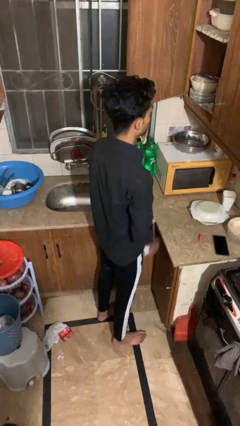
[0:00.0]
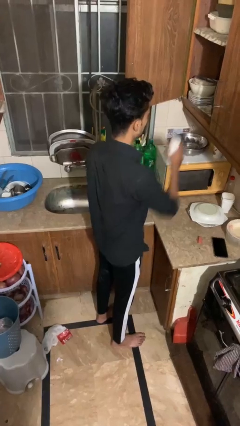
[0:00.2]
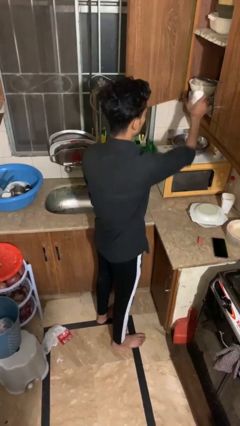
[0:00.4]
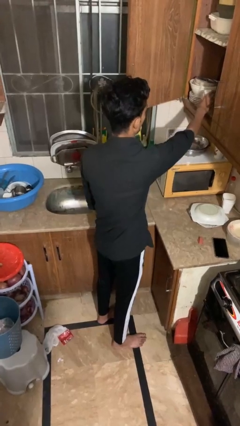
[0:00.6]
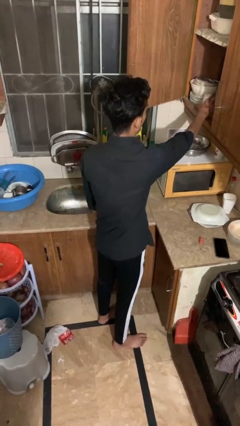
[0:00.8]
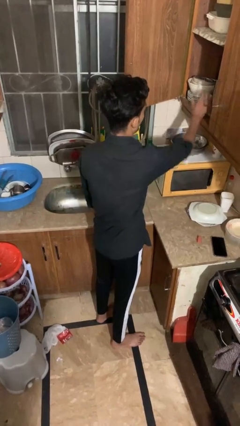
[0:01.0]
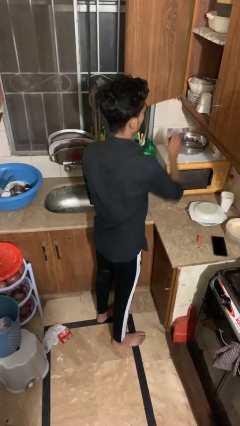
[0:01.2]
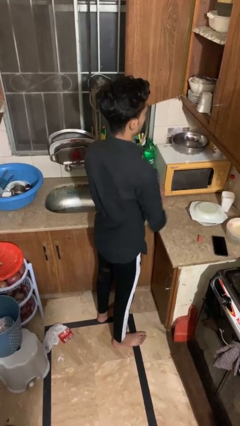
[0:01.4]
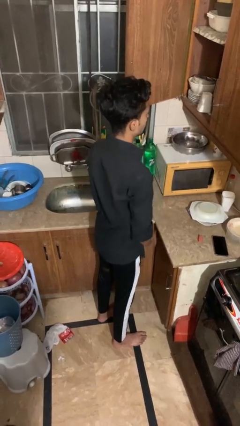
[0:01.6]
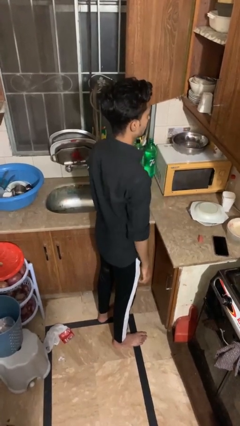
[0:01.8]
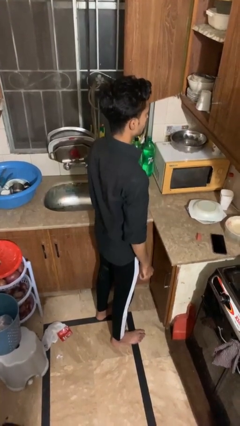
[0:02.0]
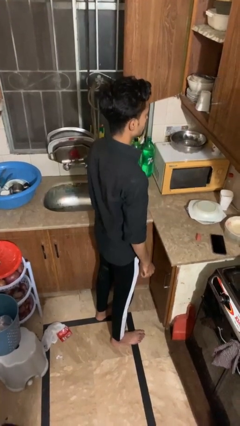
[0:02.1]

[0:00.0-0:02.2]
person puts down object into cabinet

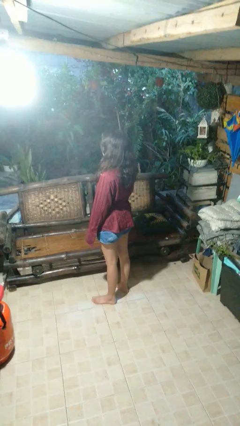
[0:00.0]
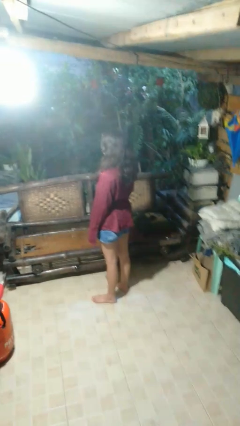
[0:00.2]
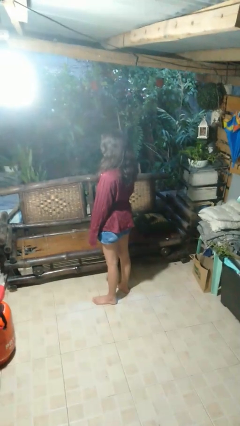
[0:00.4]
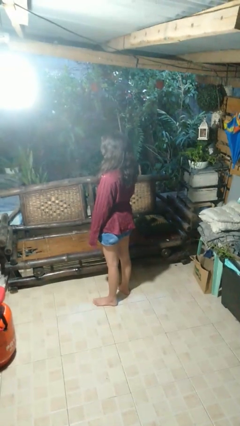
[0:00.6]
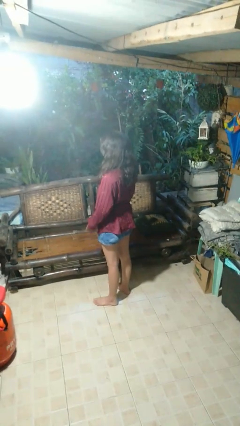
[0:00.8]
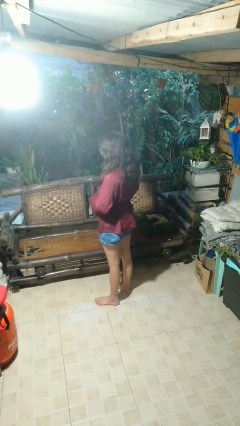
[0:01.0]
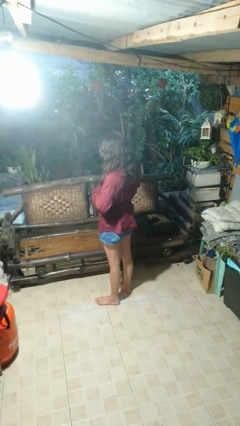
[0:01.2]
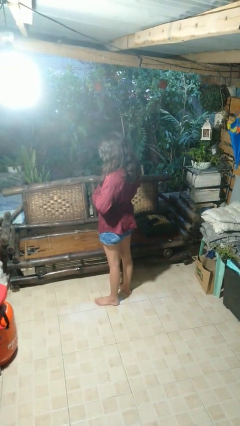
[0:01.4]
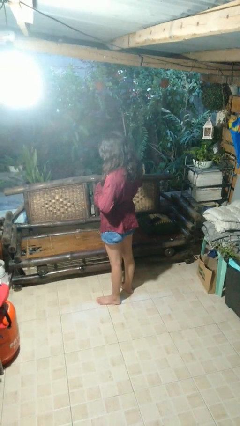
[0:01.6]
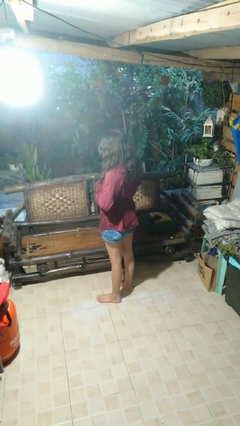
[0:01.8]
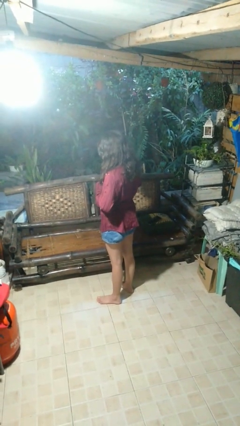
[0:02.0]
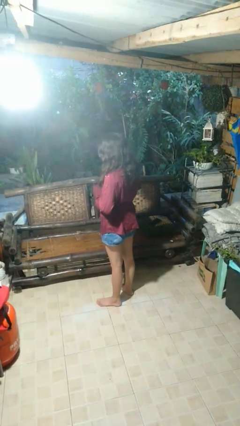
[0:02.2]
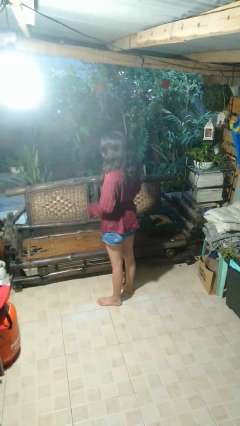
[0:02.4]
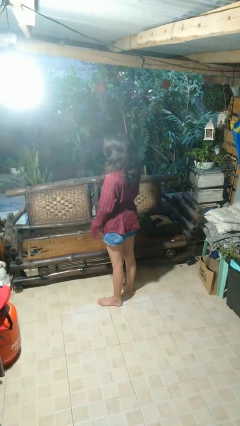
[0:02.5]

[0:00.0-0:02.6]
person buttons shirt

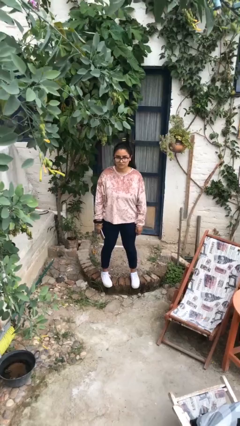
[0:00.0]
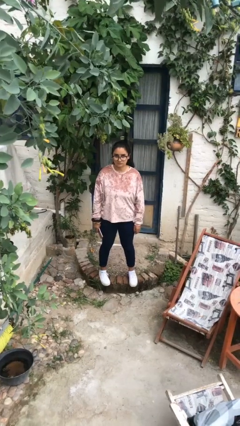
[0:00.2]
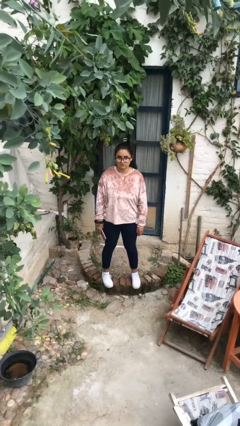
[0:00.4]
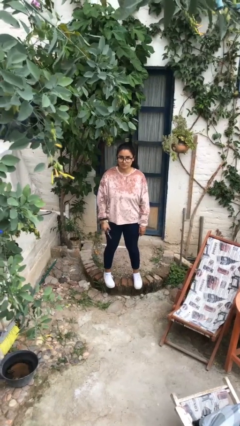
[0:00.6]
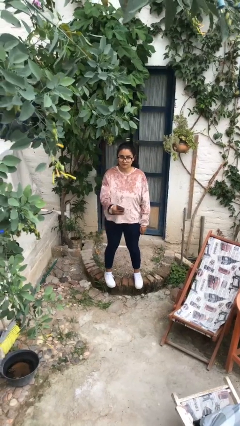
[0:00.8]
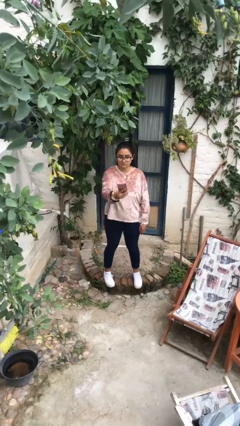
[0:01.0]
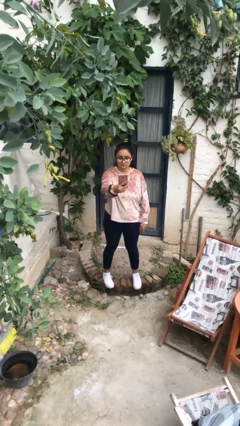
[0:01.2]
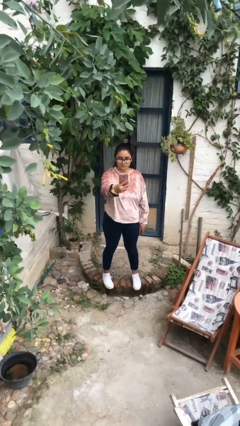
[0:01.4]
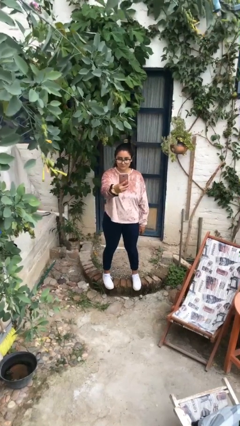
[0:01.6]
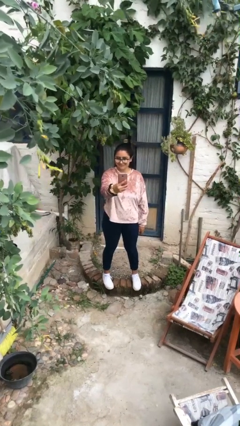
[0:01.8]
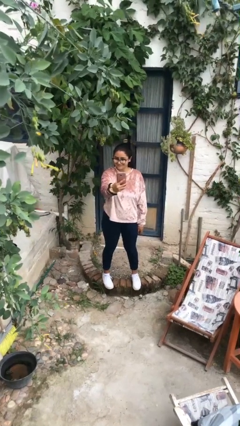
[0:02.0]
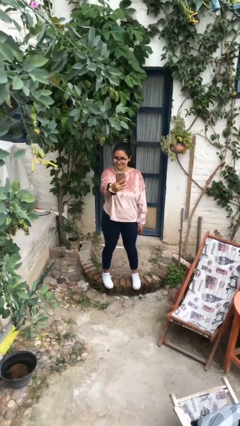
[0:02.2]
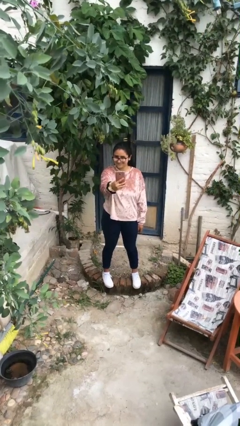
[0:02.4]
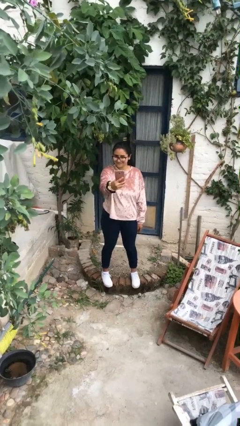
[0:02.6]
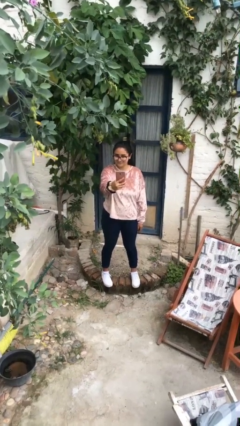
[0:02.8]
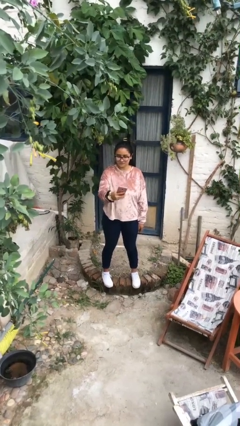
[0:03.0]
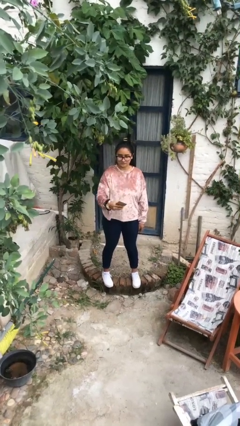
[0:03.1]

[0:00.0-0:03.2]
person takes selfie

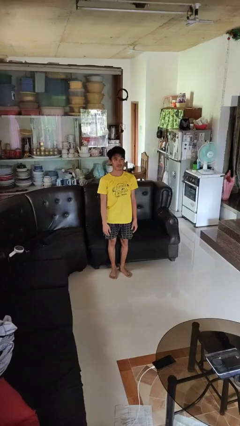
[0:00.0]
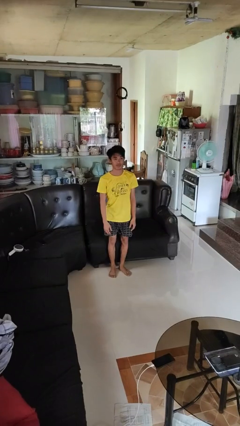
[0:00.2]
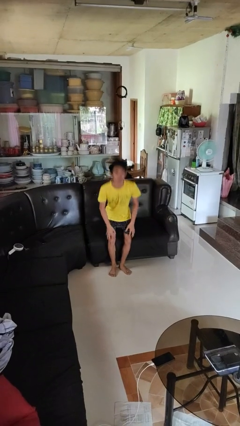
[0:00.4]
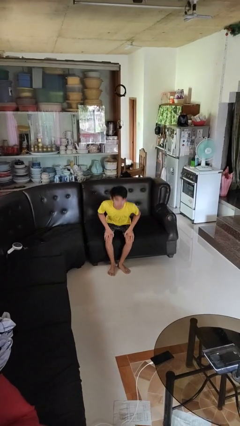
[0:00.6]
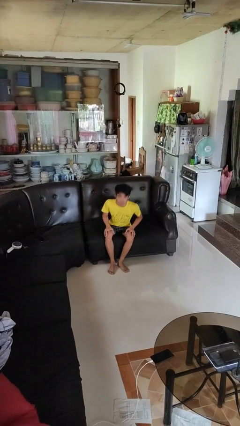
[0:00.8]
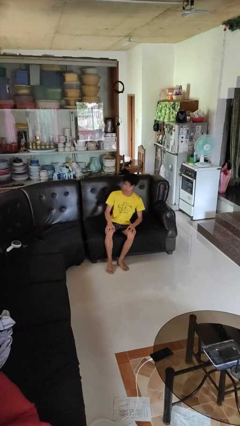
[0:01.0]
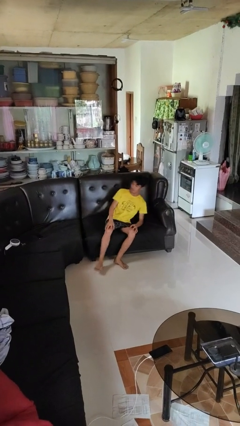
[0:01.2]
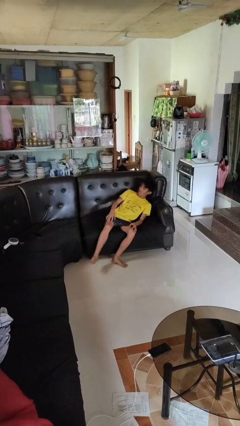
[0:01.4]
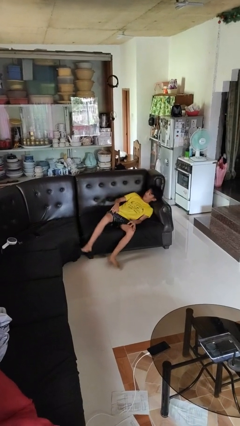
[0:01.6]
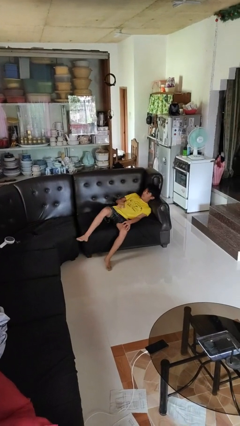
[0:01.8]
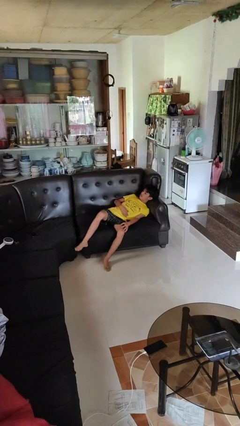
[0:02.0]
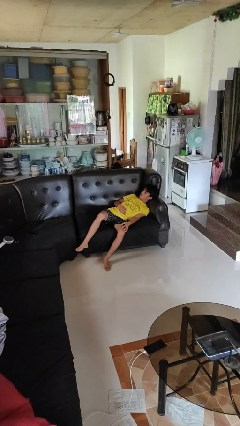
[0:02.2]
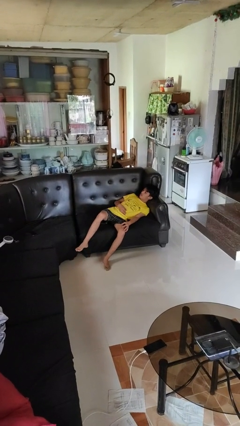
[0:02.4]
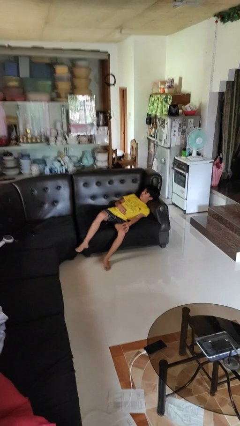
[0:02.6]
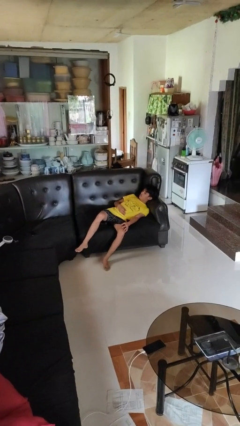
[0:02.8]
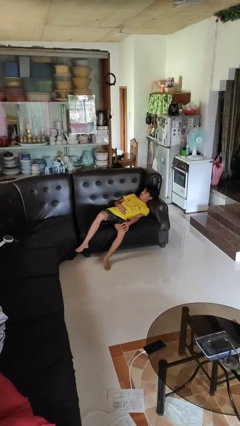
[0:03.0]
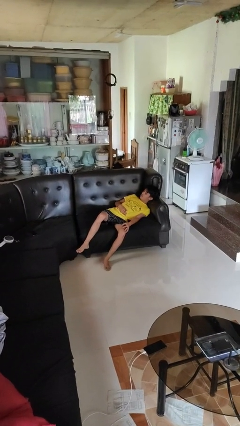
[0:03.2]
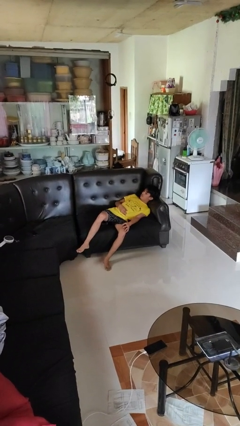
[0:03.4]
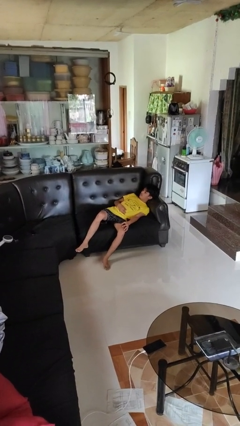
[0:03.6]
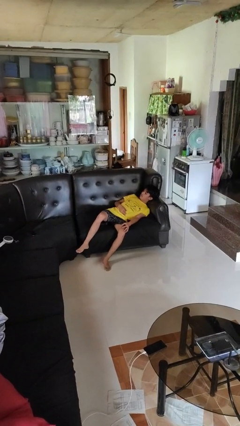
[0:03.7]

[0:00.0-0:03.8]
person lies down on couch

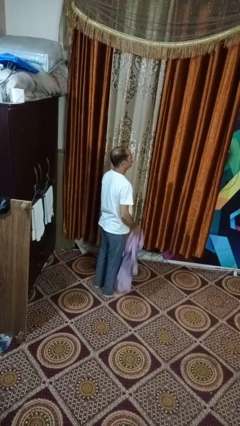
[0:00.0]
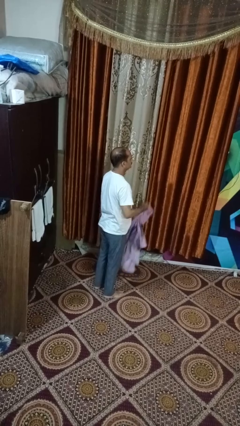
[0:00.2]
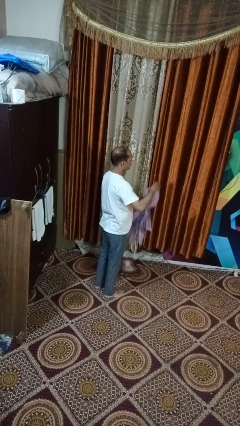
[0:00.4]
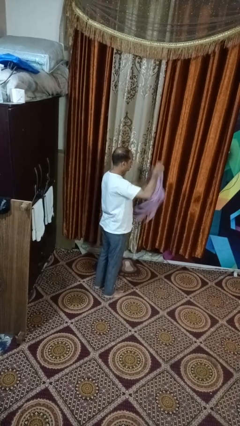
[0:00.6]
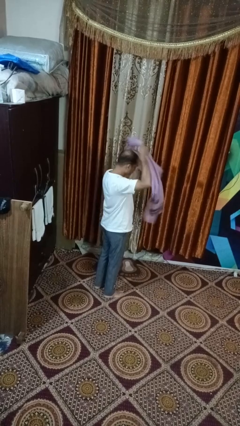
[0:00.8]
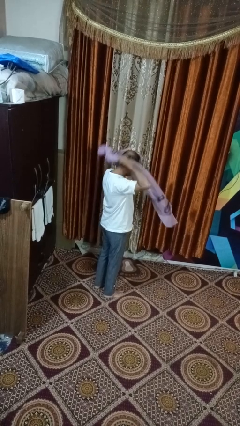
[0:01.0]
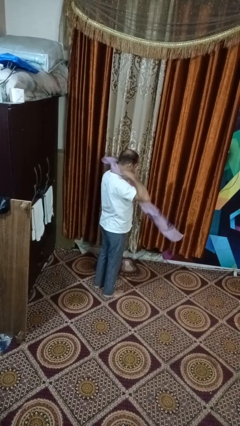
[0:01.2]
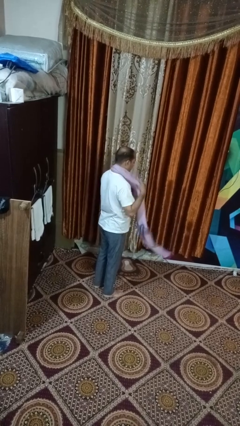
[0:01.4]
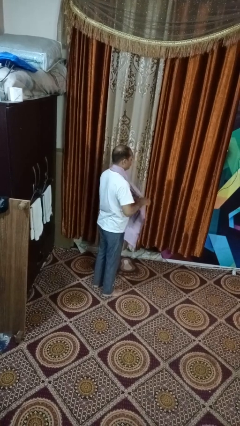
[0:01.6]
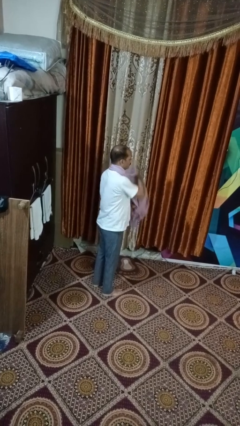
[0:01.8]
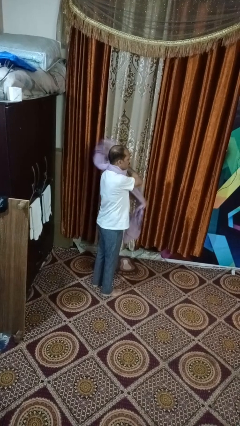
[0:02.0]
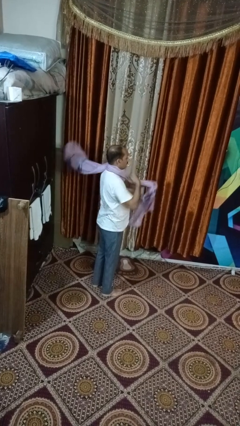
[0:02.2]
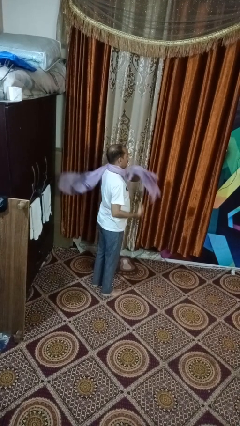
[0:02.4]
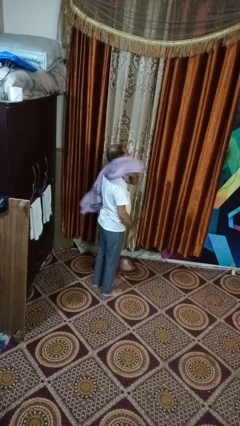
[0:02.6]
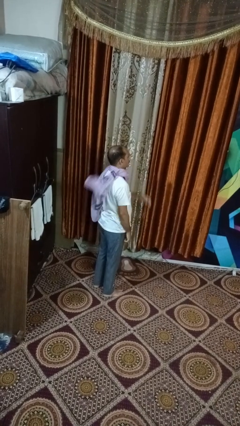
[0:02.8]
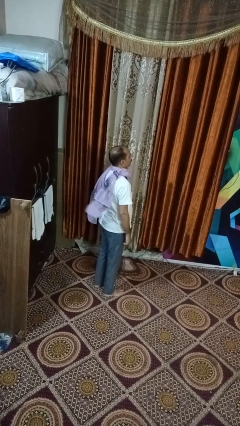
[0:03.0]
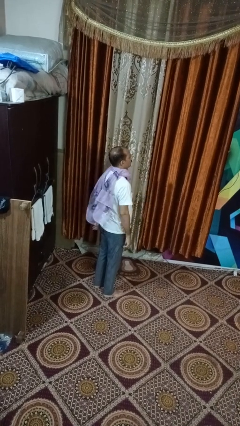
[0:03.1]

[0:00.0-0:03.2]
person puts on scarf

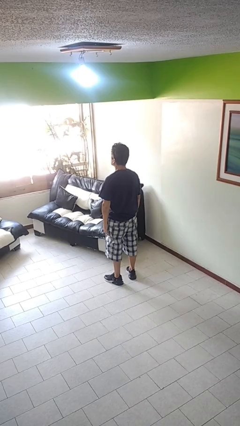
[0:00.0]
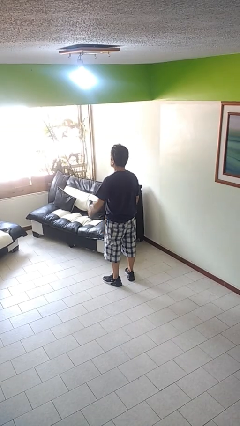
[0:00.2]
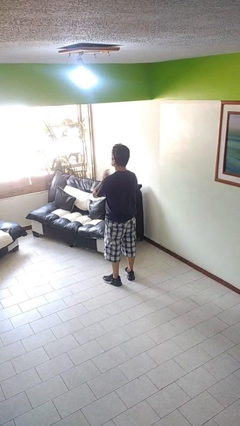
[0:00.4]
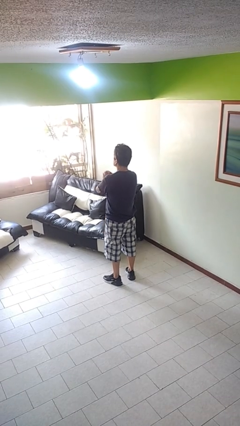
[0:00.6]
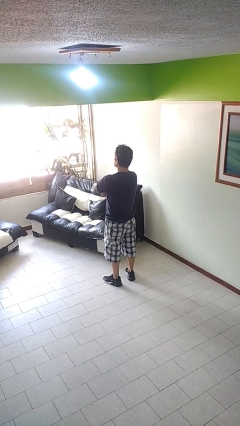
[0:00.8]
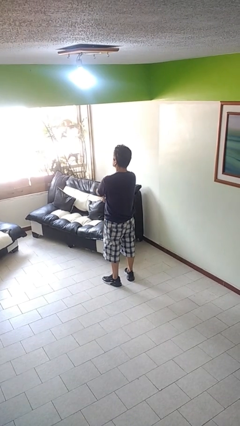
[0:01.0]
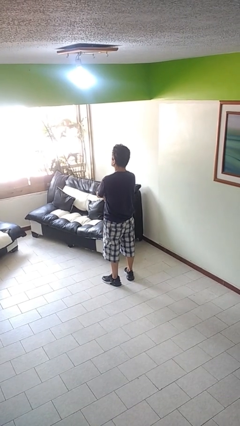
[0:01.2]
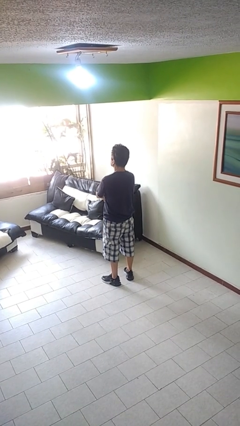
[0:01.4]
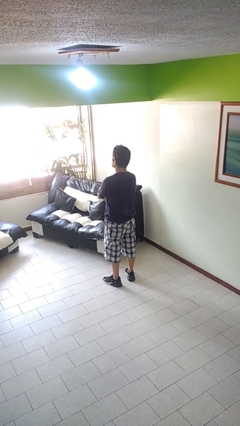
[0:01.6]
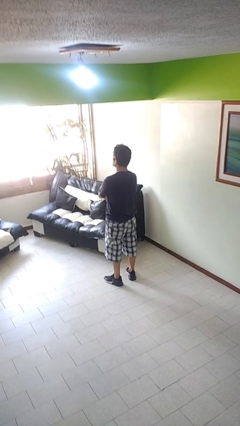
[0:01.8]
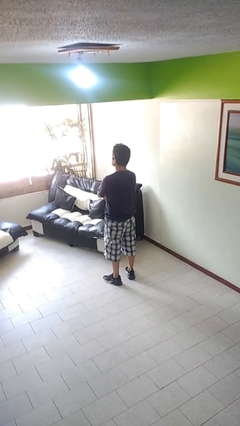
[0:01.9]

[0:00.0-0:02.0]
person crosses arms

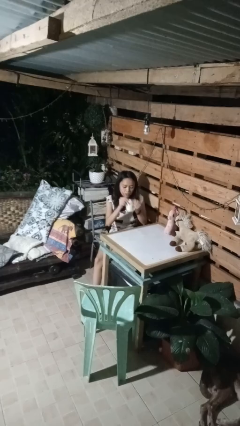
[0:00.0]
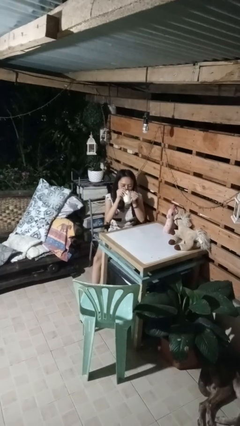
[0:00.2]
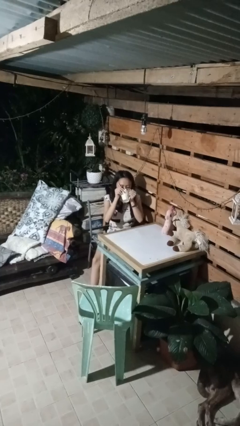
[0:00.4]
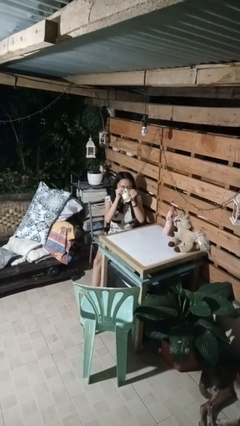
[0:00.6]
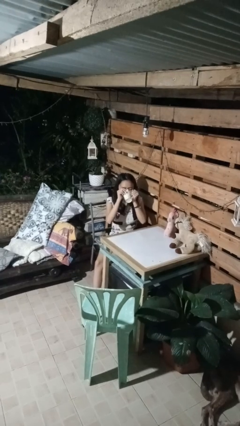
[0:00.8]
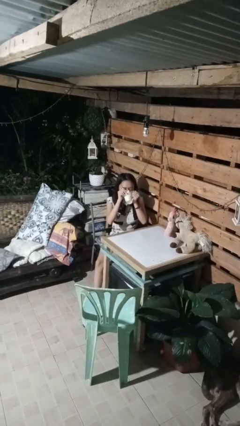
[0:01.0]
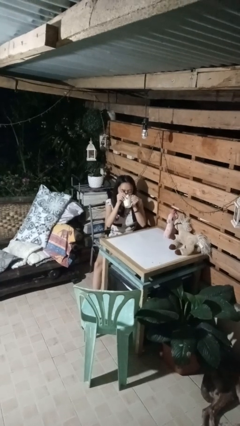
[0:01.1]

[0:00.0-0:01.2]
person drinks from mug
